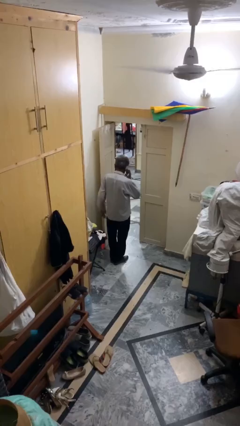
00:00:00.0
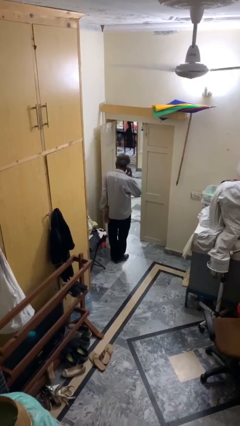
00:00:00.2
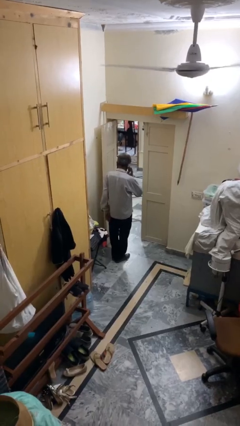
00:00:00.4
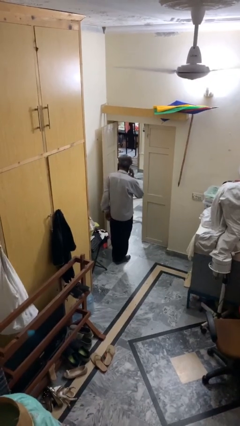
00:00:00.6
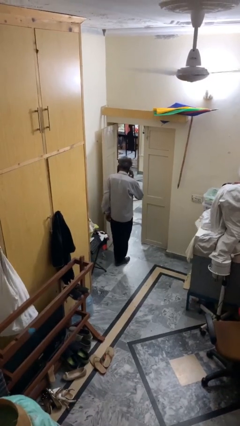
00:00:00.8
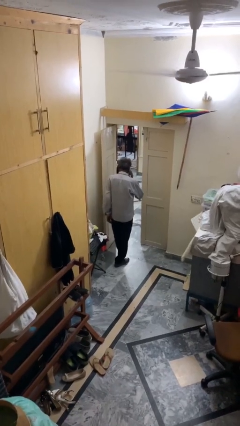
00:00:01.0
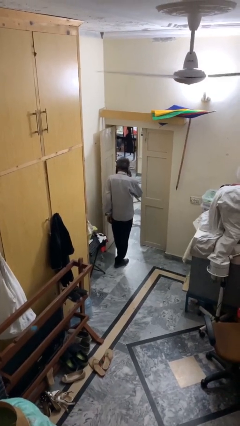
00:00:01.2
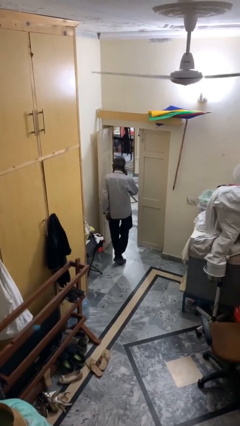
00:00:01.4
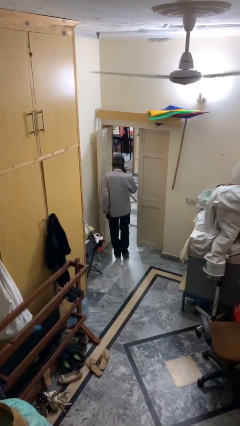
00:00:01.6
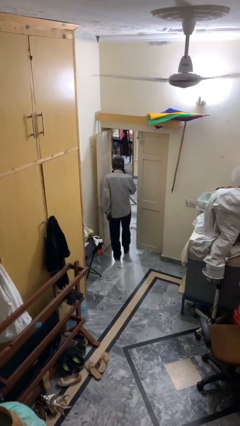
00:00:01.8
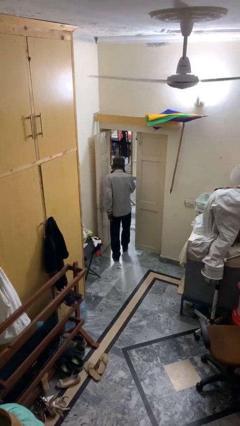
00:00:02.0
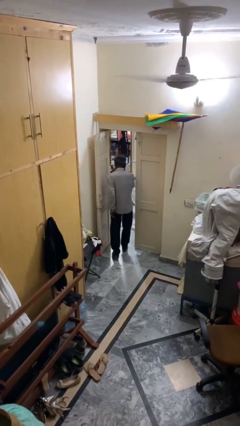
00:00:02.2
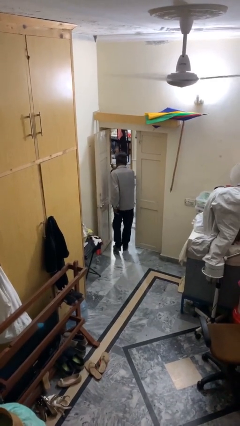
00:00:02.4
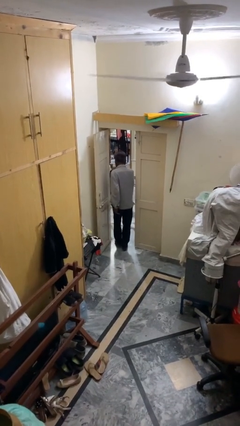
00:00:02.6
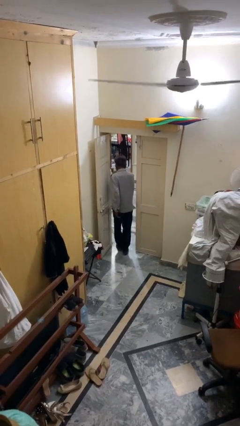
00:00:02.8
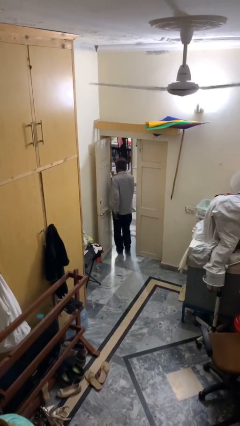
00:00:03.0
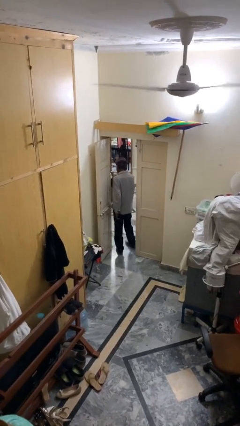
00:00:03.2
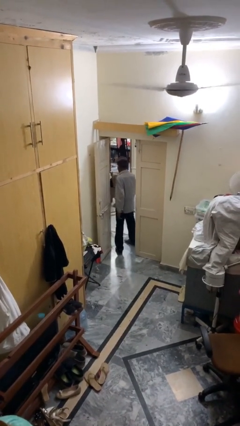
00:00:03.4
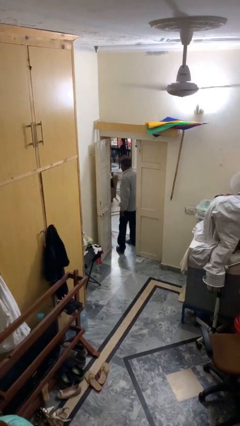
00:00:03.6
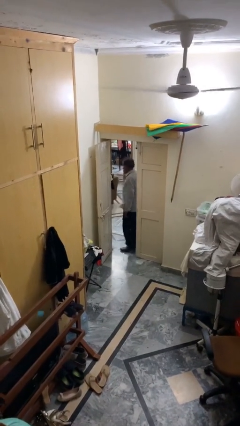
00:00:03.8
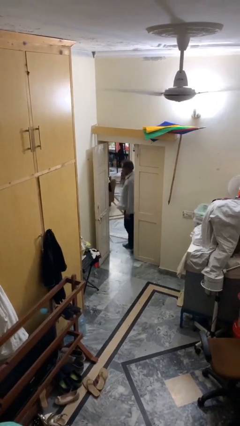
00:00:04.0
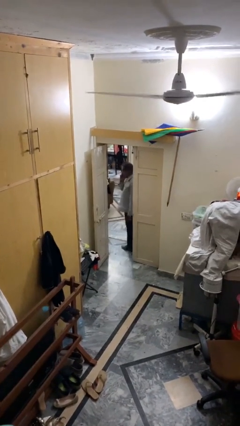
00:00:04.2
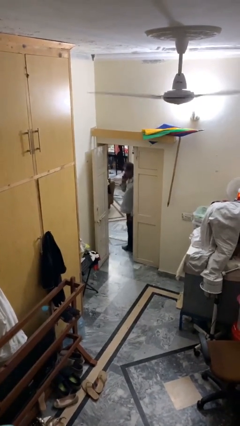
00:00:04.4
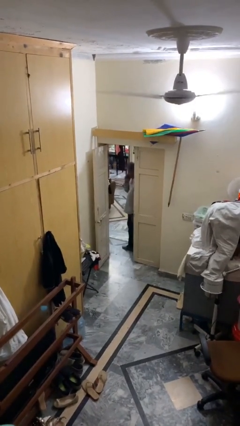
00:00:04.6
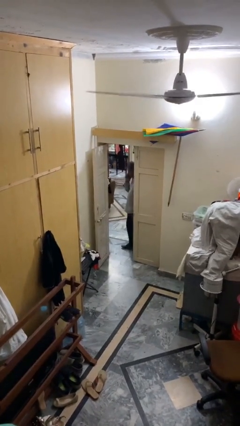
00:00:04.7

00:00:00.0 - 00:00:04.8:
person exits scene through structure

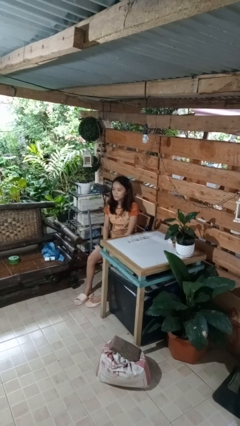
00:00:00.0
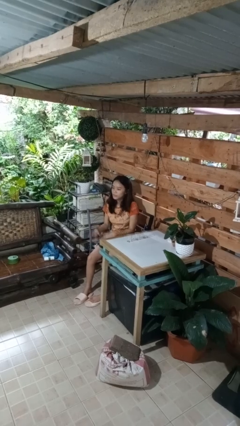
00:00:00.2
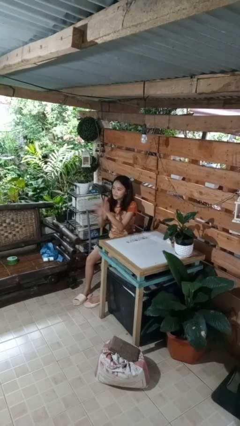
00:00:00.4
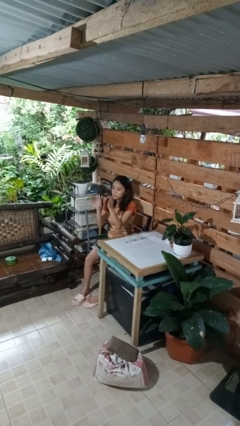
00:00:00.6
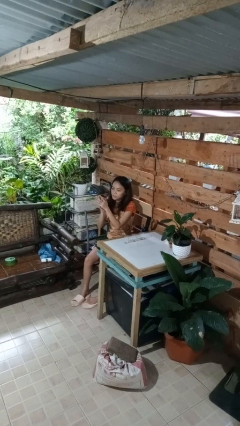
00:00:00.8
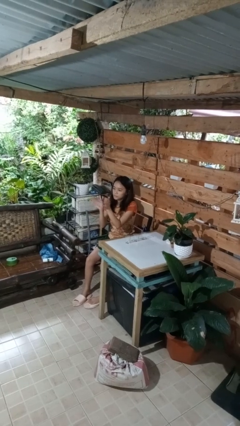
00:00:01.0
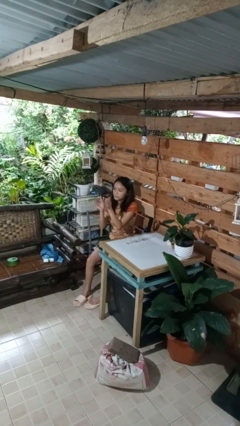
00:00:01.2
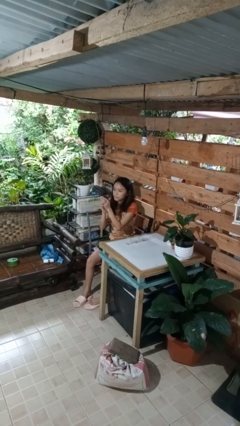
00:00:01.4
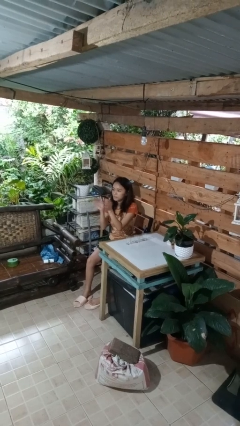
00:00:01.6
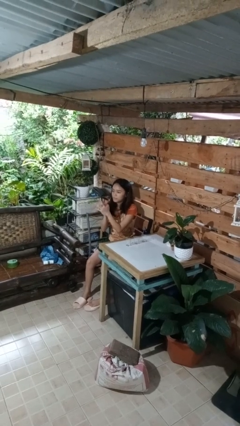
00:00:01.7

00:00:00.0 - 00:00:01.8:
person claps hands

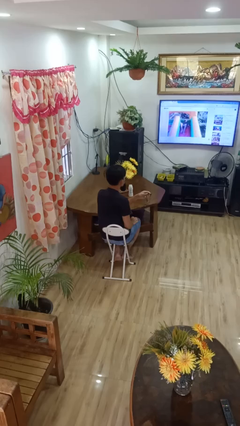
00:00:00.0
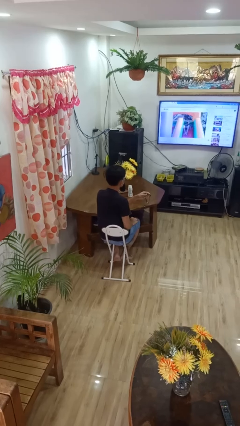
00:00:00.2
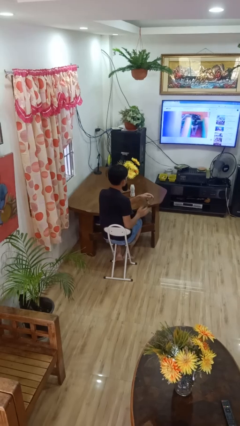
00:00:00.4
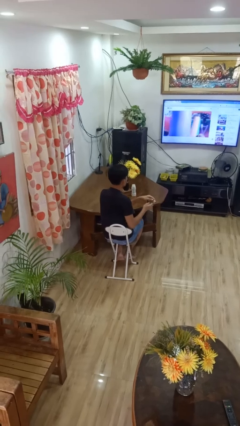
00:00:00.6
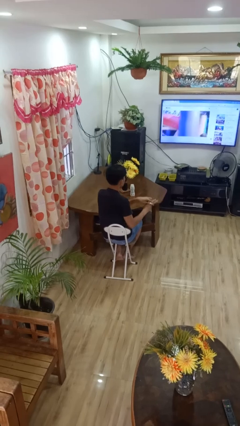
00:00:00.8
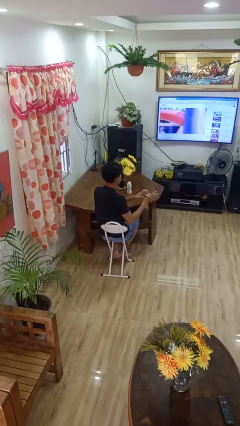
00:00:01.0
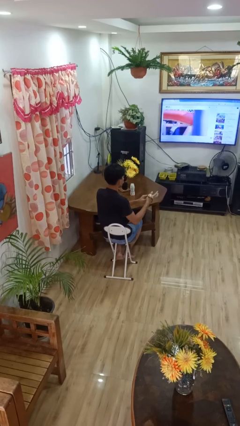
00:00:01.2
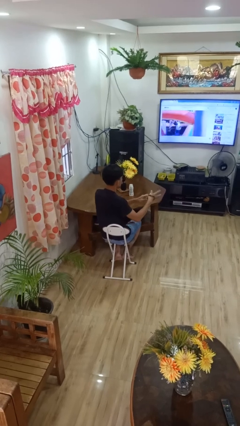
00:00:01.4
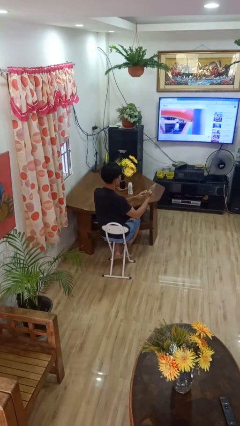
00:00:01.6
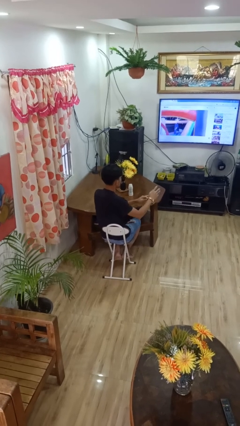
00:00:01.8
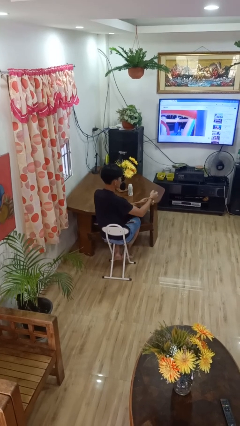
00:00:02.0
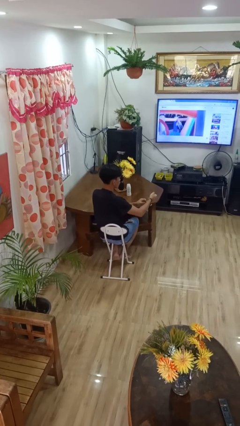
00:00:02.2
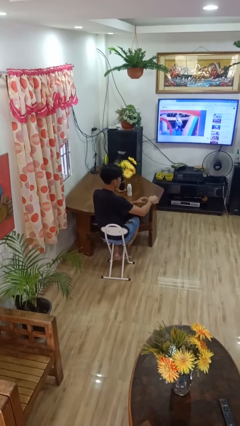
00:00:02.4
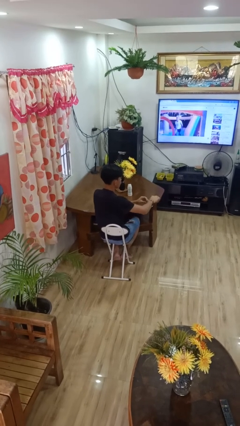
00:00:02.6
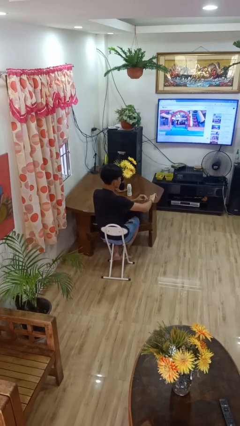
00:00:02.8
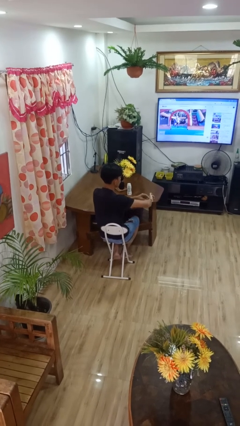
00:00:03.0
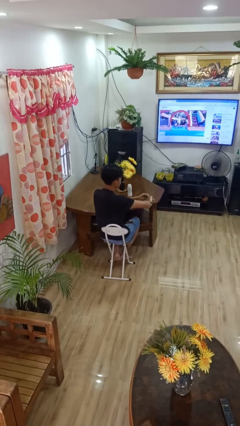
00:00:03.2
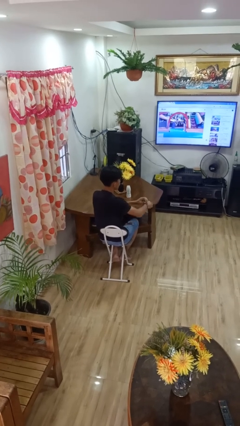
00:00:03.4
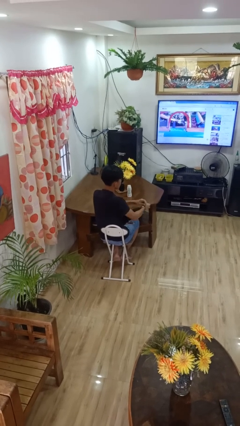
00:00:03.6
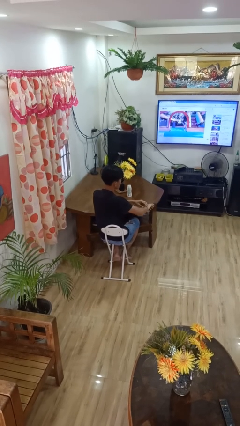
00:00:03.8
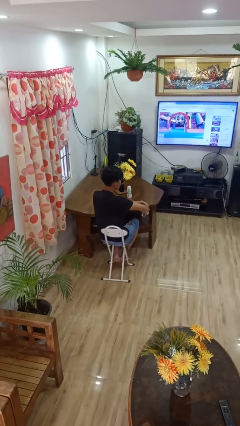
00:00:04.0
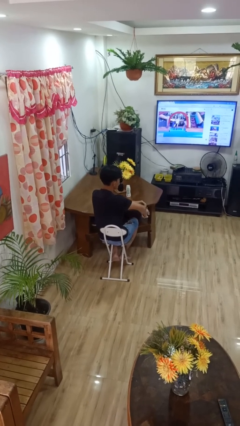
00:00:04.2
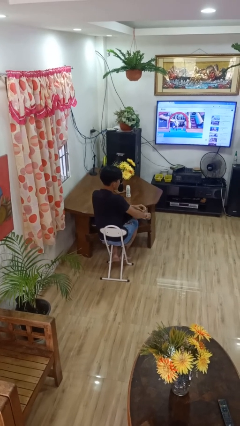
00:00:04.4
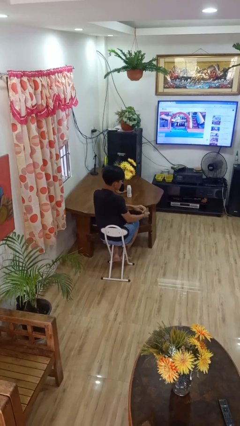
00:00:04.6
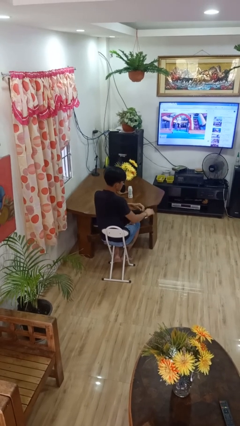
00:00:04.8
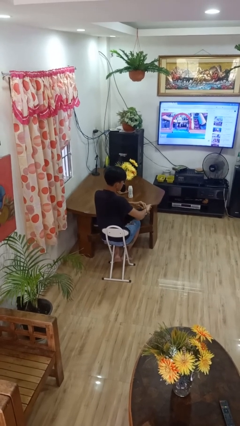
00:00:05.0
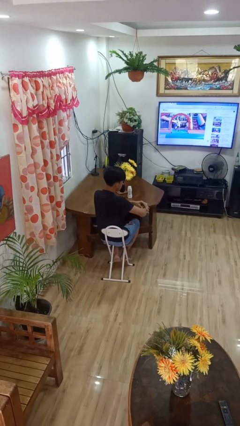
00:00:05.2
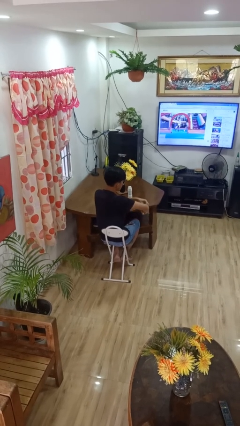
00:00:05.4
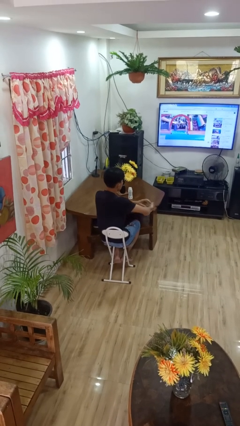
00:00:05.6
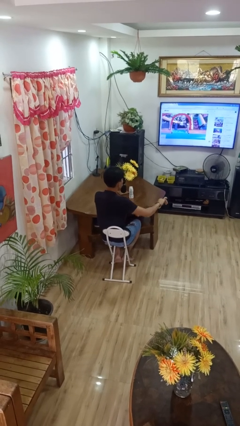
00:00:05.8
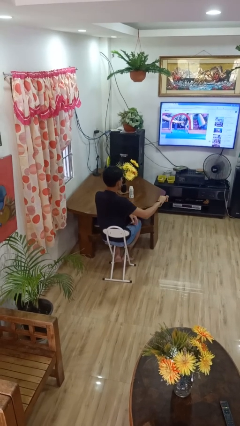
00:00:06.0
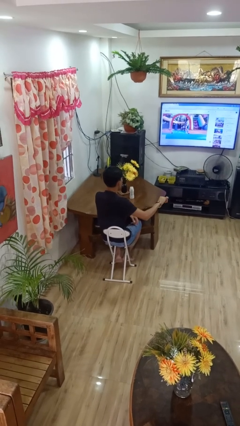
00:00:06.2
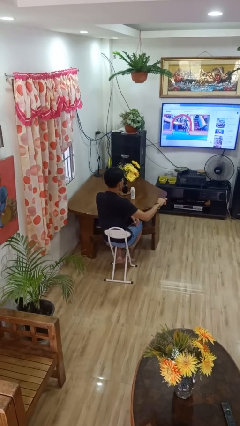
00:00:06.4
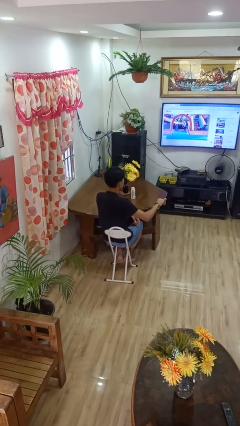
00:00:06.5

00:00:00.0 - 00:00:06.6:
person puts on wristwatch

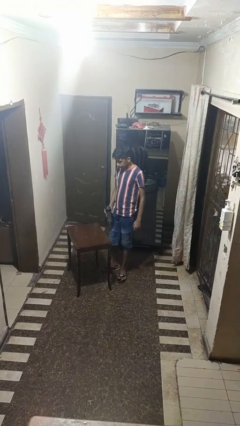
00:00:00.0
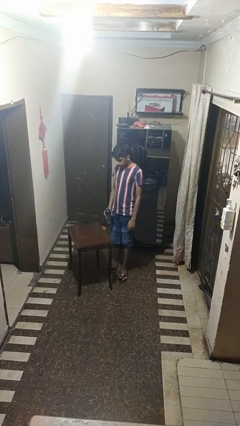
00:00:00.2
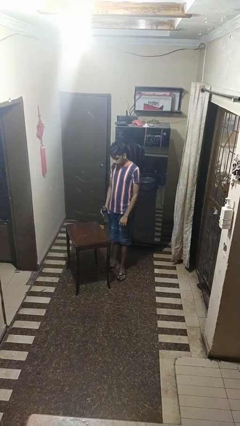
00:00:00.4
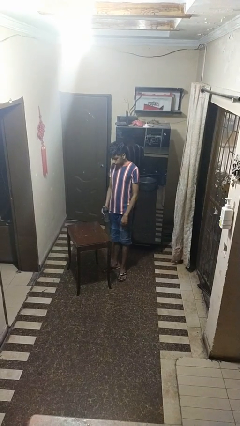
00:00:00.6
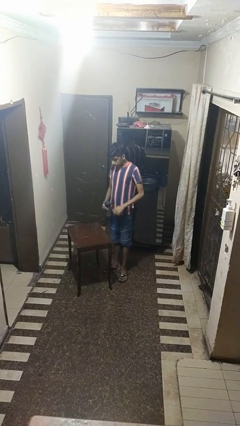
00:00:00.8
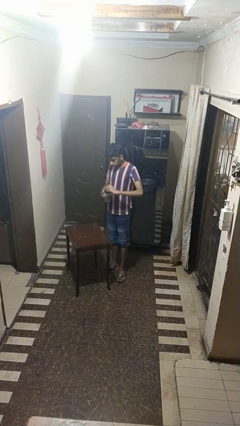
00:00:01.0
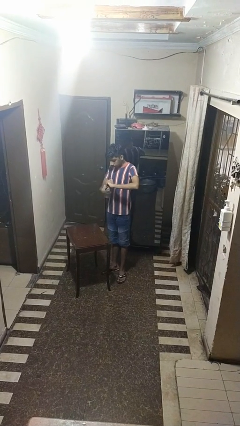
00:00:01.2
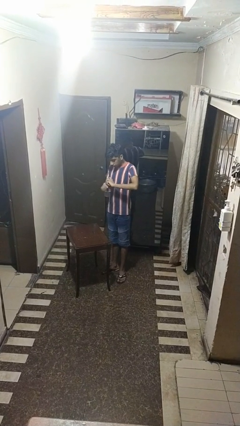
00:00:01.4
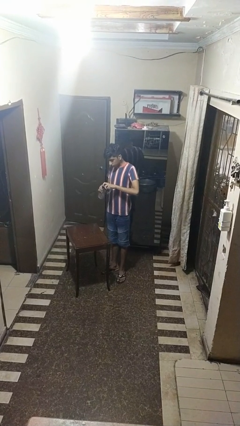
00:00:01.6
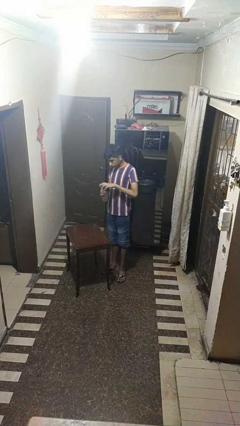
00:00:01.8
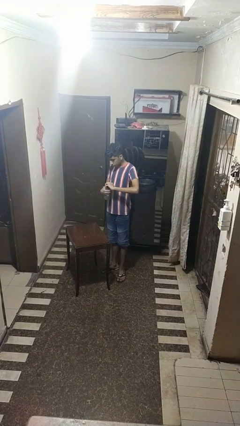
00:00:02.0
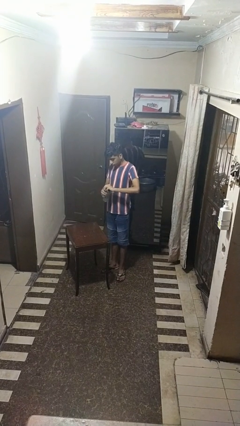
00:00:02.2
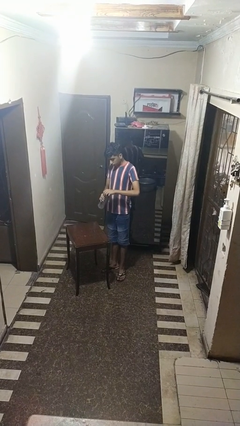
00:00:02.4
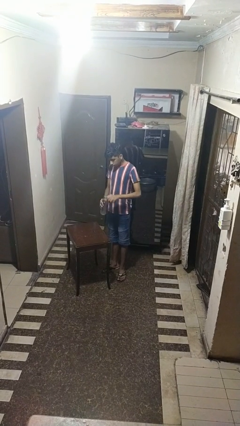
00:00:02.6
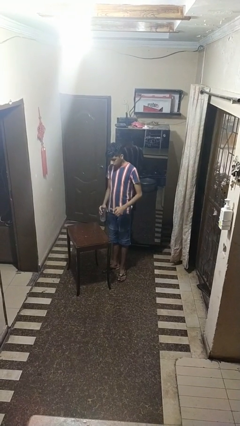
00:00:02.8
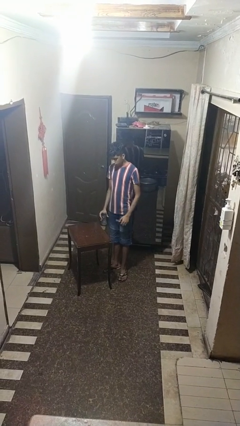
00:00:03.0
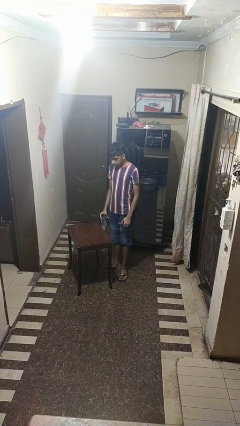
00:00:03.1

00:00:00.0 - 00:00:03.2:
person unscrews lid from bottle

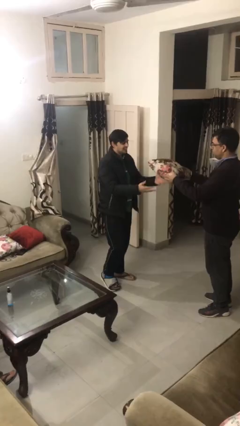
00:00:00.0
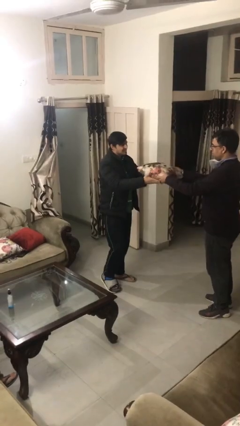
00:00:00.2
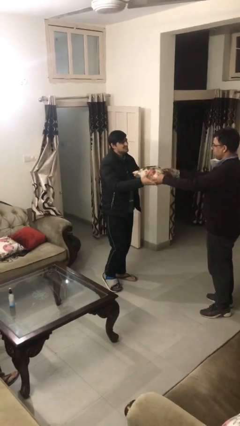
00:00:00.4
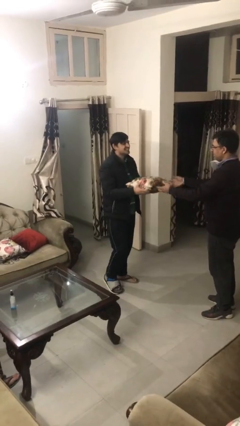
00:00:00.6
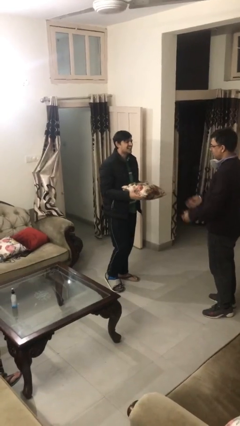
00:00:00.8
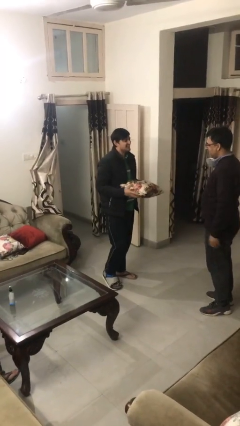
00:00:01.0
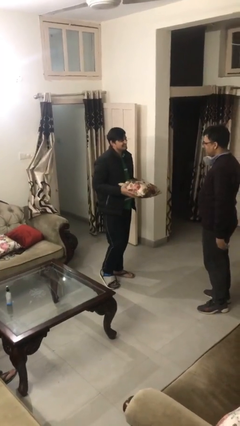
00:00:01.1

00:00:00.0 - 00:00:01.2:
person transfers object to person

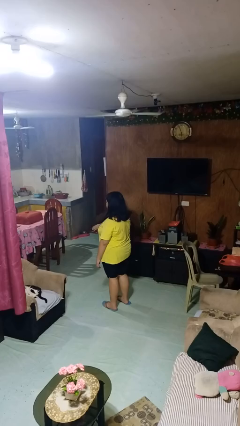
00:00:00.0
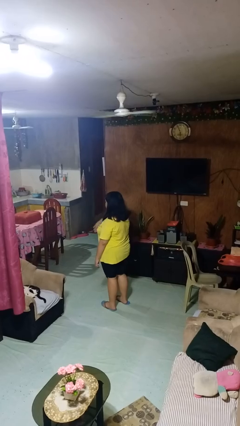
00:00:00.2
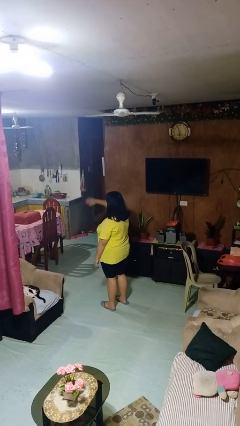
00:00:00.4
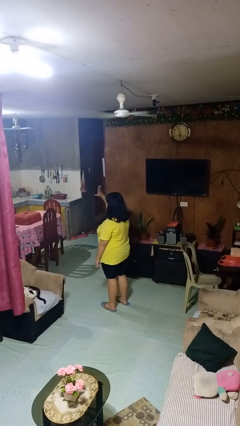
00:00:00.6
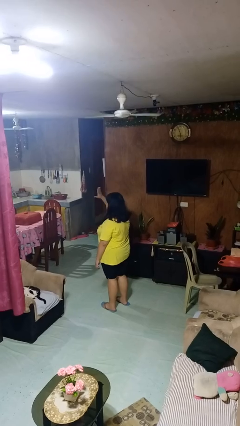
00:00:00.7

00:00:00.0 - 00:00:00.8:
person gestures swipe up
